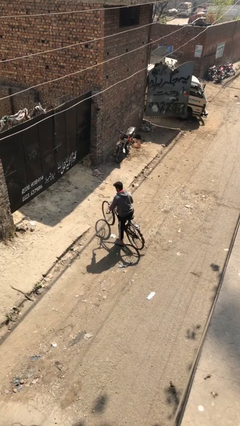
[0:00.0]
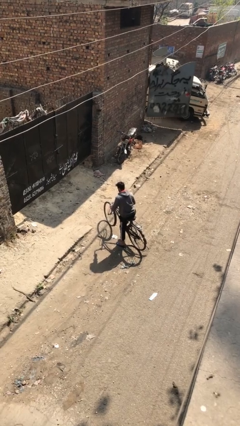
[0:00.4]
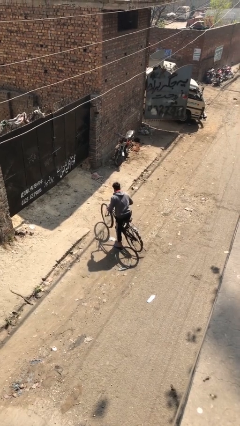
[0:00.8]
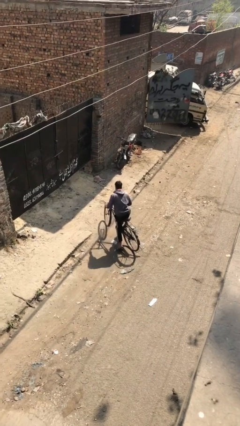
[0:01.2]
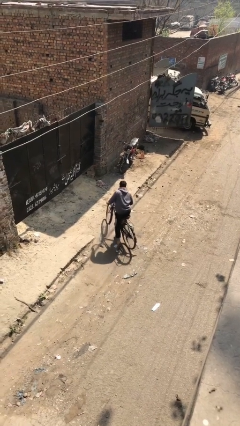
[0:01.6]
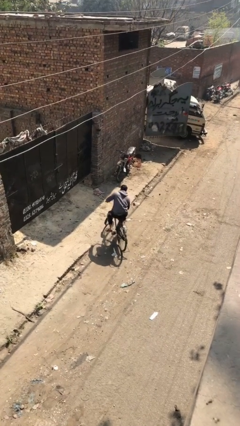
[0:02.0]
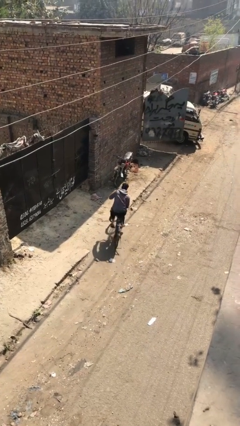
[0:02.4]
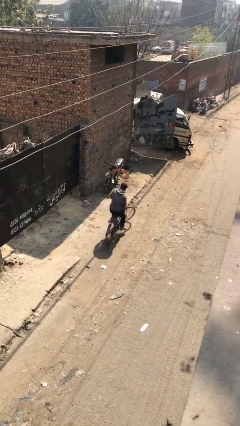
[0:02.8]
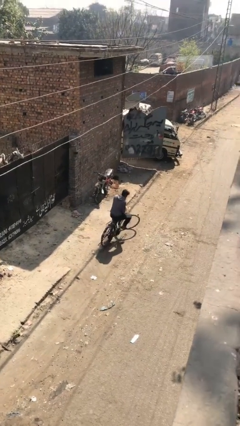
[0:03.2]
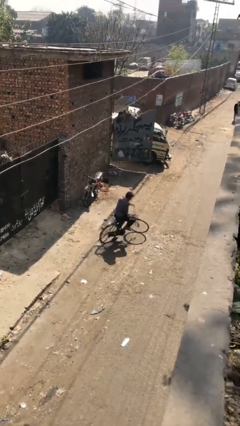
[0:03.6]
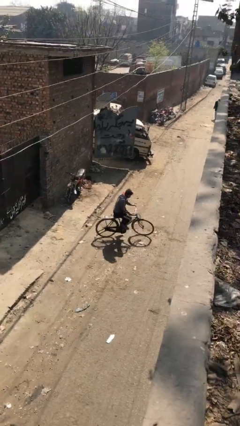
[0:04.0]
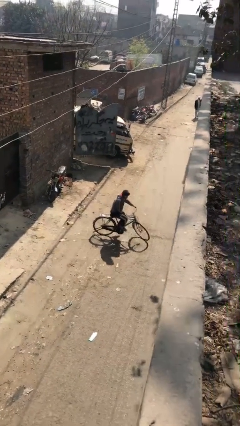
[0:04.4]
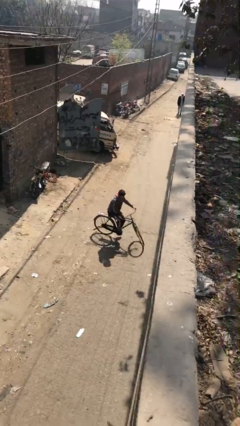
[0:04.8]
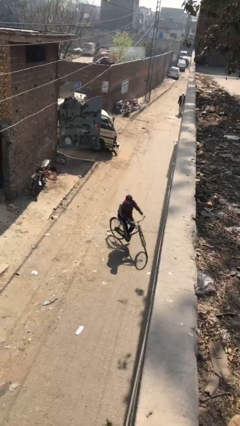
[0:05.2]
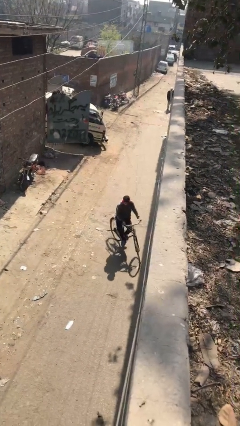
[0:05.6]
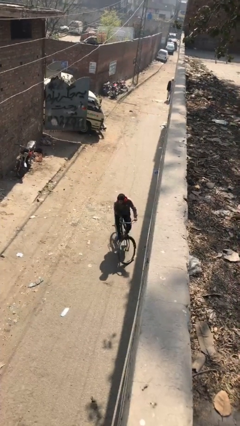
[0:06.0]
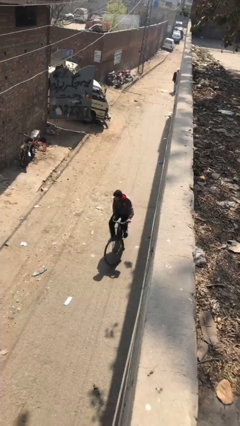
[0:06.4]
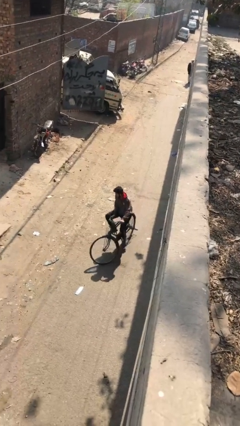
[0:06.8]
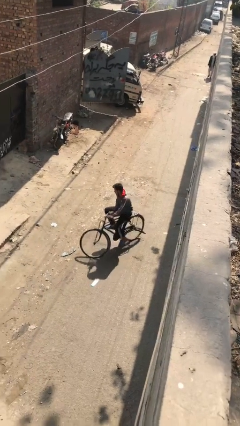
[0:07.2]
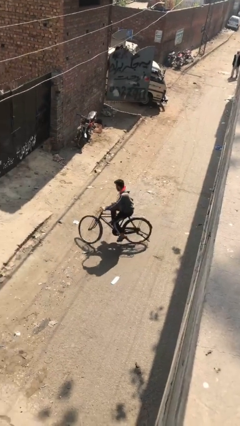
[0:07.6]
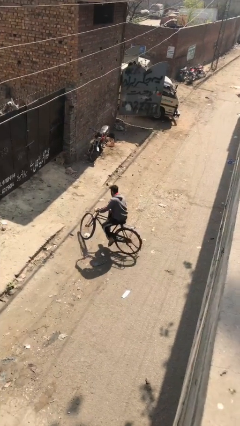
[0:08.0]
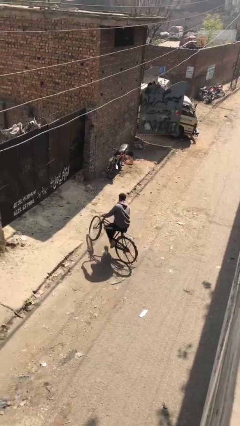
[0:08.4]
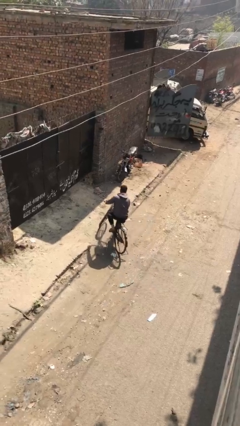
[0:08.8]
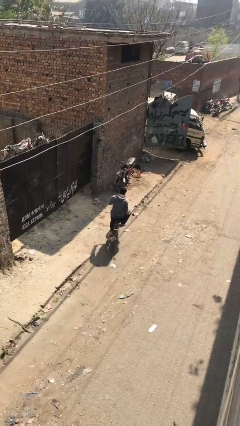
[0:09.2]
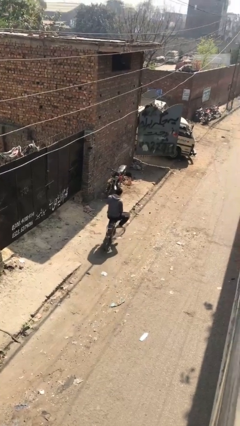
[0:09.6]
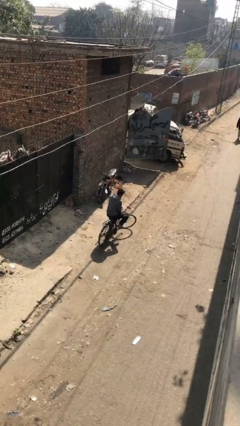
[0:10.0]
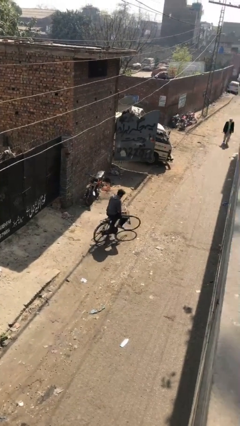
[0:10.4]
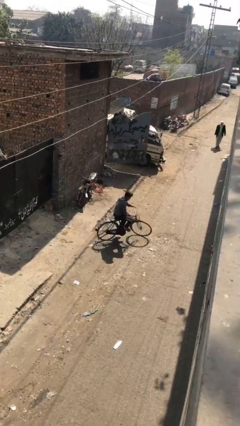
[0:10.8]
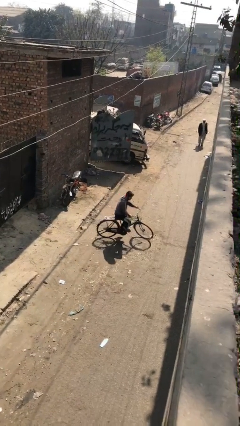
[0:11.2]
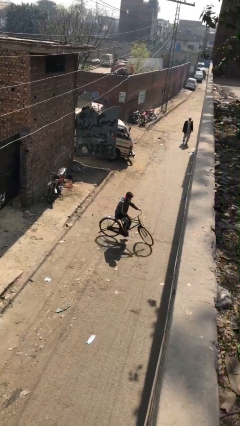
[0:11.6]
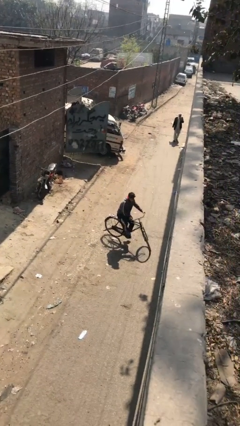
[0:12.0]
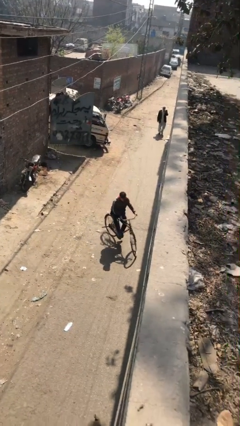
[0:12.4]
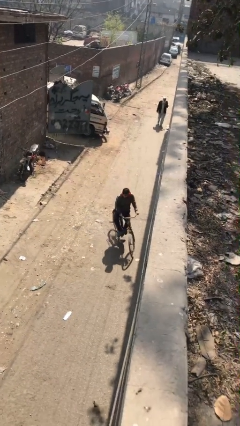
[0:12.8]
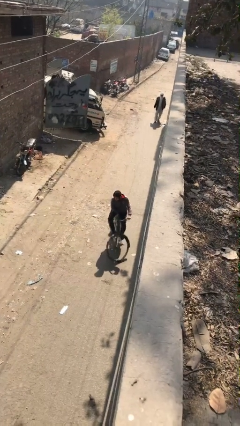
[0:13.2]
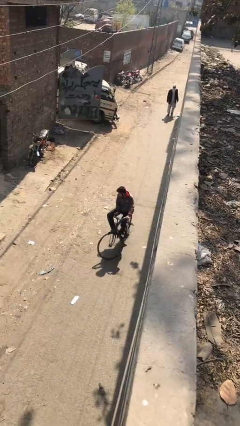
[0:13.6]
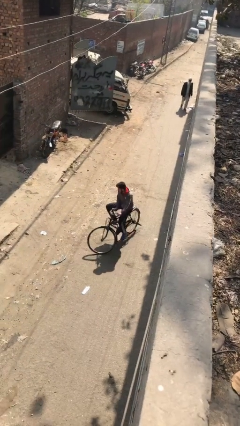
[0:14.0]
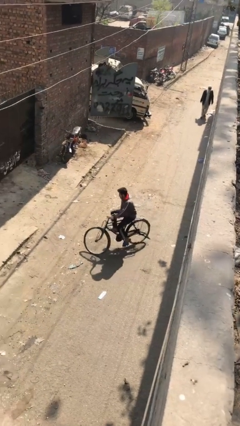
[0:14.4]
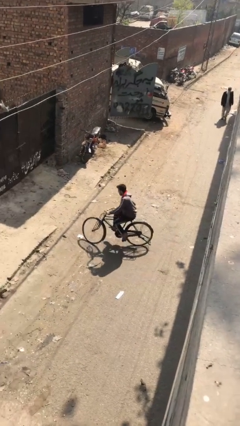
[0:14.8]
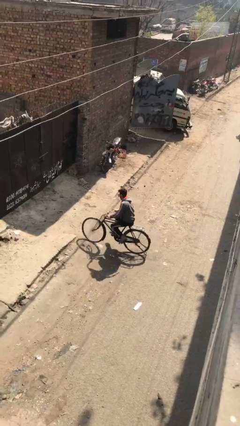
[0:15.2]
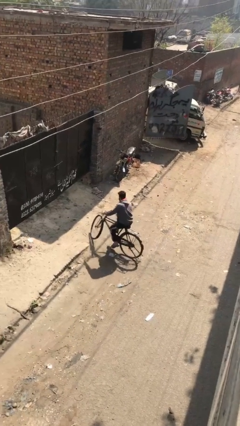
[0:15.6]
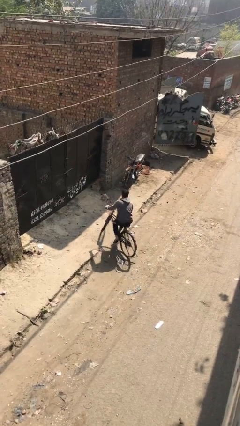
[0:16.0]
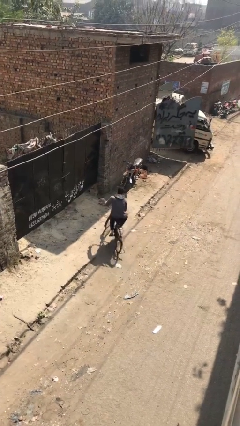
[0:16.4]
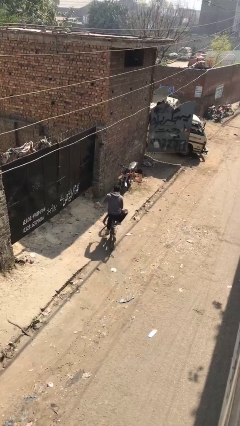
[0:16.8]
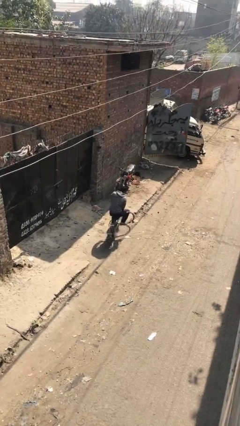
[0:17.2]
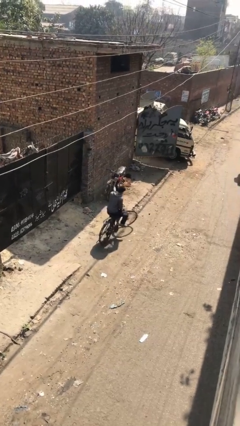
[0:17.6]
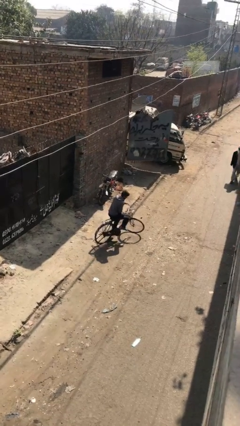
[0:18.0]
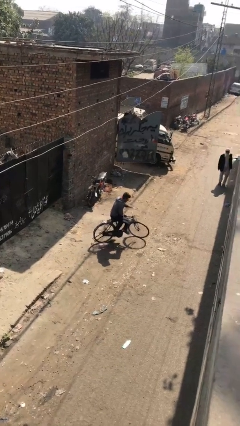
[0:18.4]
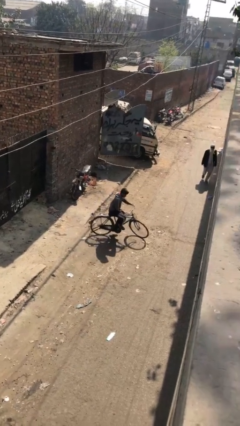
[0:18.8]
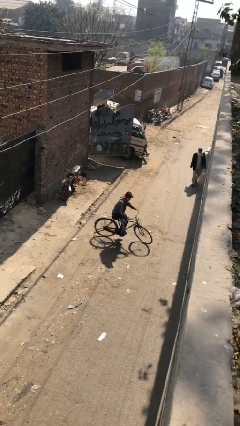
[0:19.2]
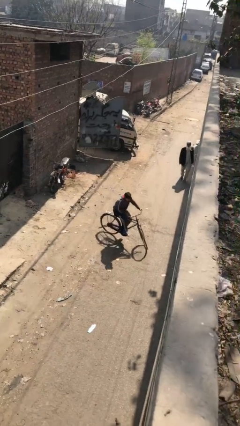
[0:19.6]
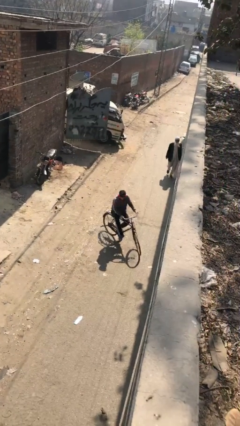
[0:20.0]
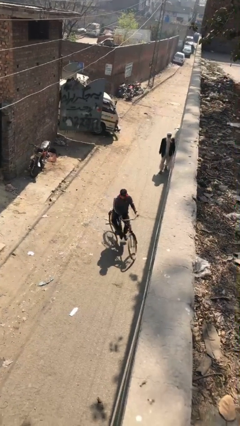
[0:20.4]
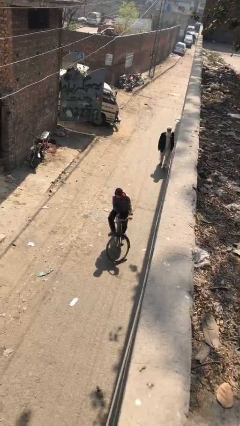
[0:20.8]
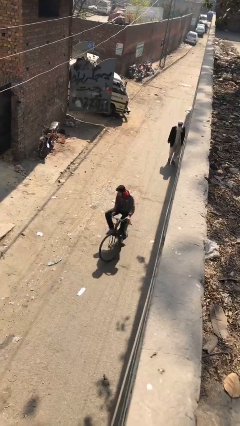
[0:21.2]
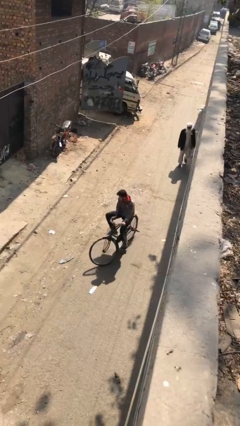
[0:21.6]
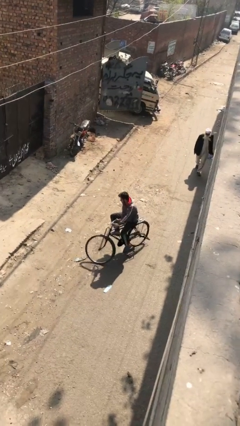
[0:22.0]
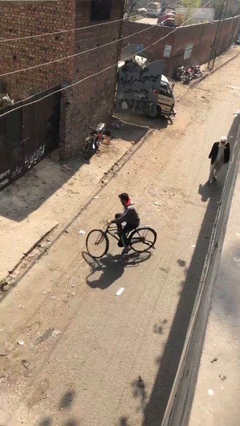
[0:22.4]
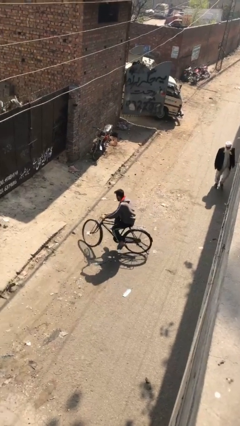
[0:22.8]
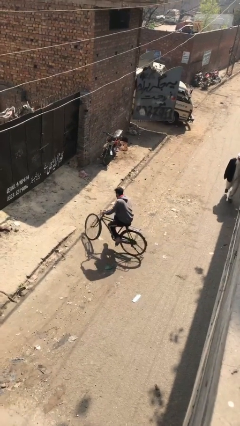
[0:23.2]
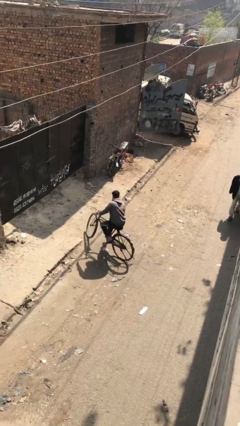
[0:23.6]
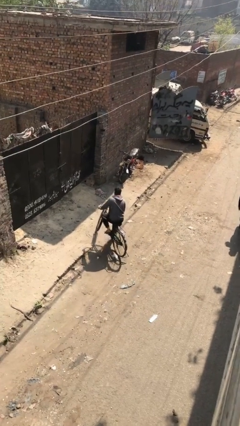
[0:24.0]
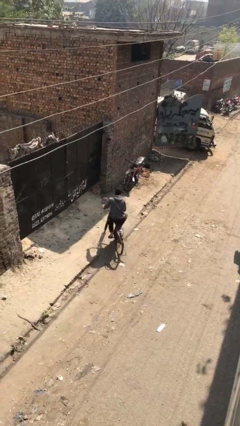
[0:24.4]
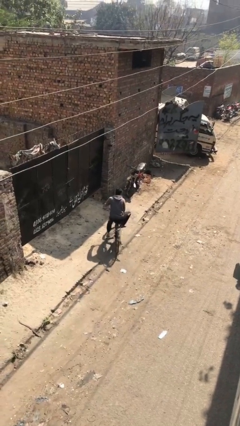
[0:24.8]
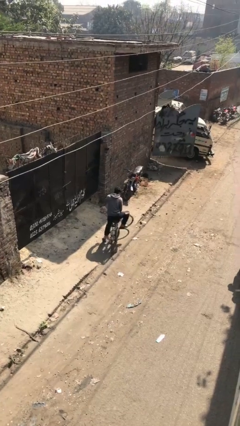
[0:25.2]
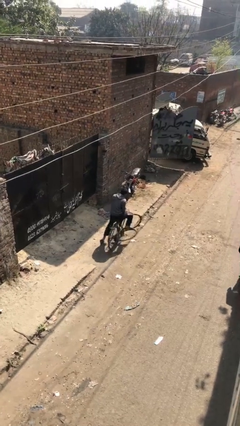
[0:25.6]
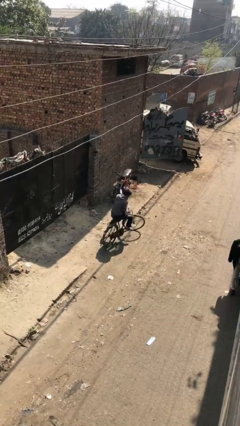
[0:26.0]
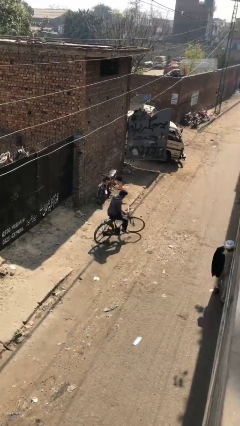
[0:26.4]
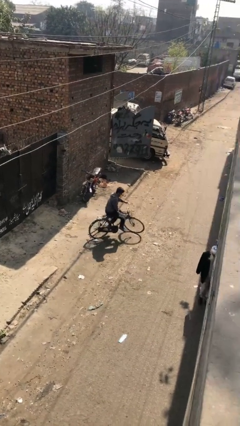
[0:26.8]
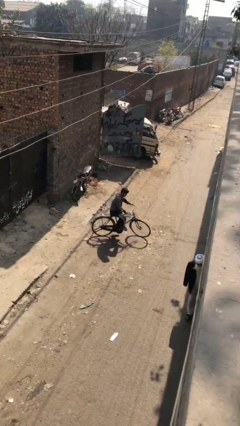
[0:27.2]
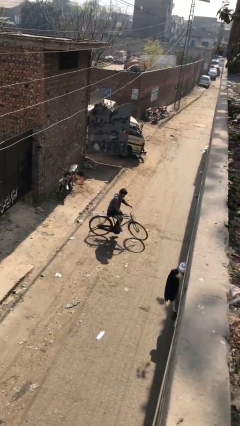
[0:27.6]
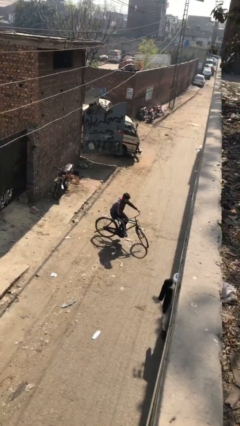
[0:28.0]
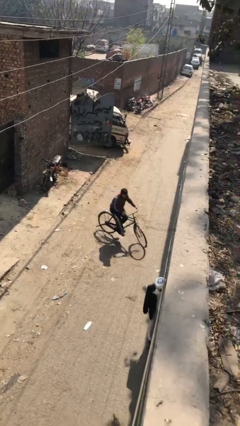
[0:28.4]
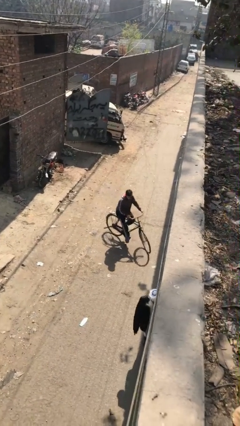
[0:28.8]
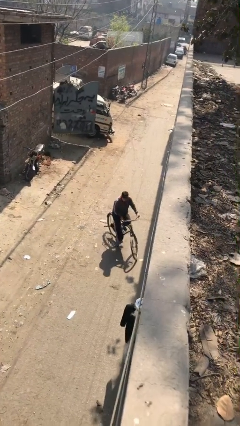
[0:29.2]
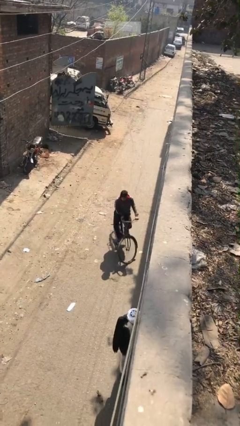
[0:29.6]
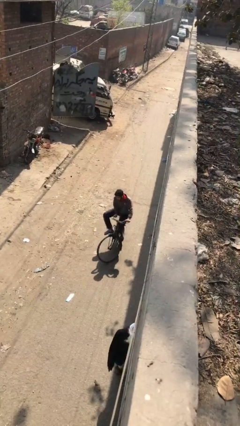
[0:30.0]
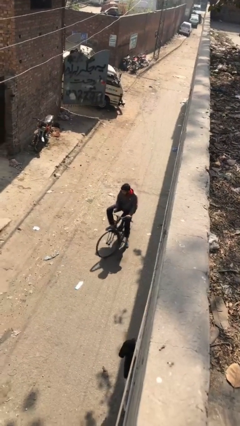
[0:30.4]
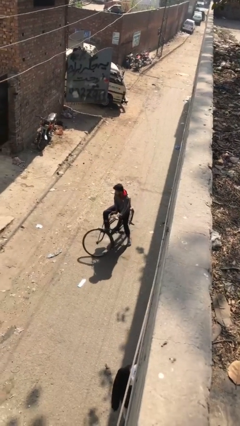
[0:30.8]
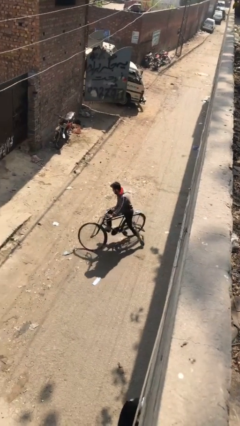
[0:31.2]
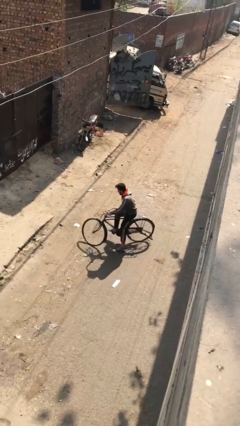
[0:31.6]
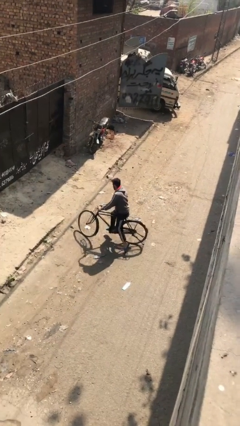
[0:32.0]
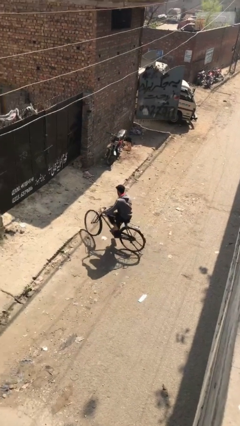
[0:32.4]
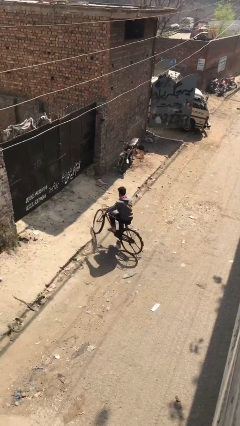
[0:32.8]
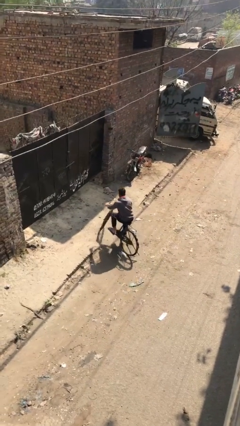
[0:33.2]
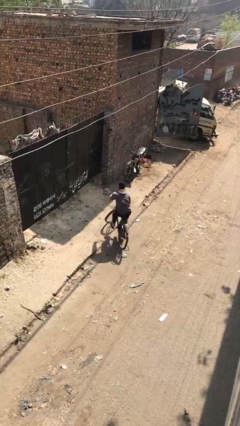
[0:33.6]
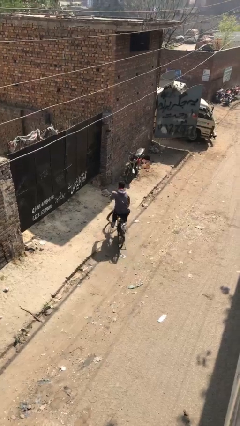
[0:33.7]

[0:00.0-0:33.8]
person rides bicycle

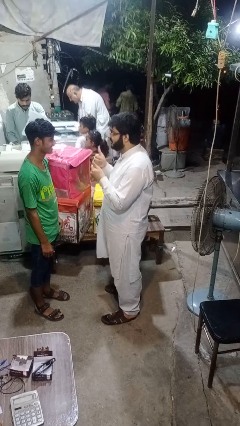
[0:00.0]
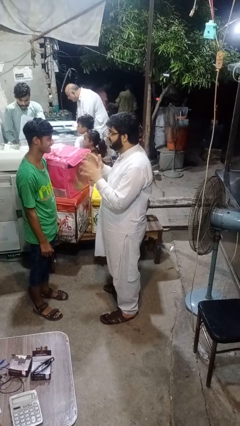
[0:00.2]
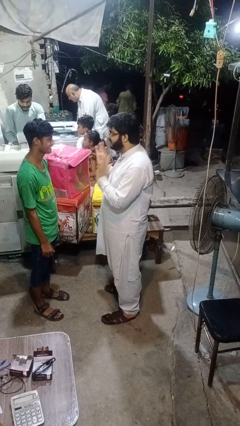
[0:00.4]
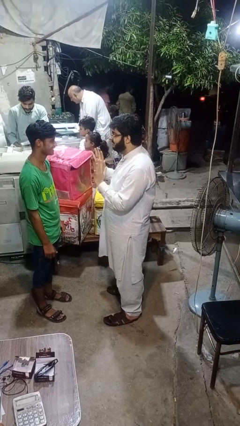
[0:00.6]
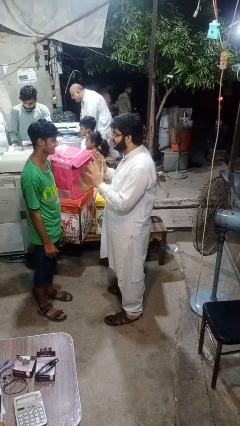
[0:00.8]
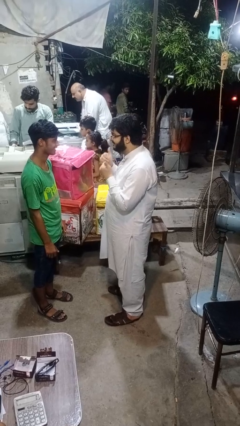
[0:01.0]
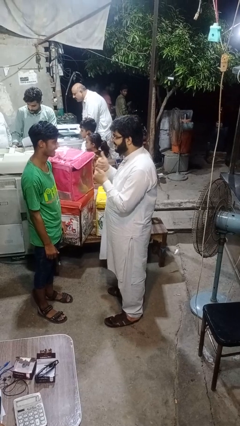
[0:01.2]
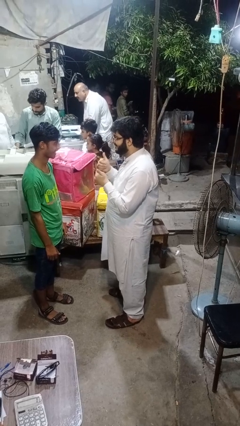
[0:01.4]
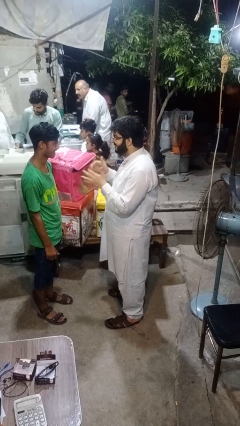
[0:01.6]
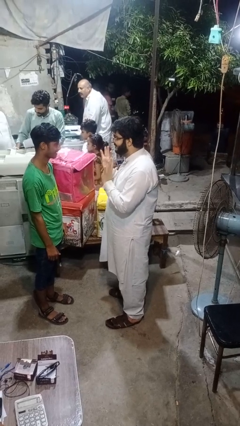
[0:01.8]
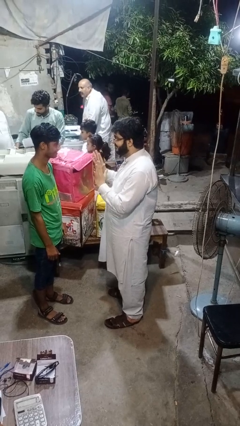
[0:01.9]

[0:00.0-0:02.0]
person talks to person
